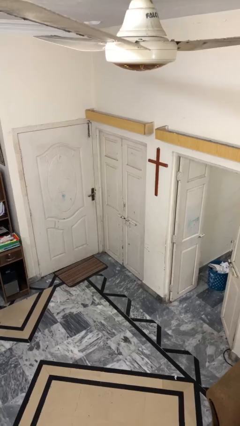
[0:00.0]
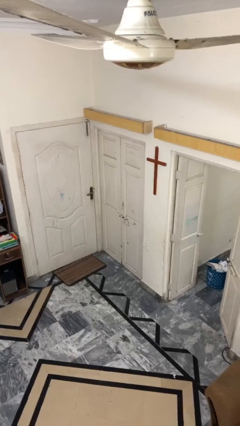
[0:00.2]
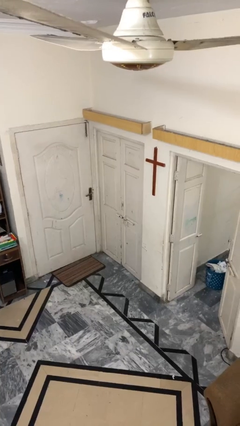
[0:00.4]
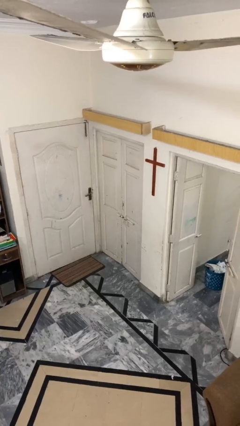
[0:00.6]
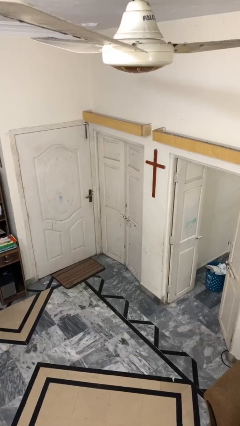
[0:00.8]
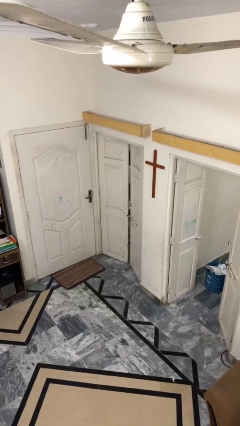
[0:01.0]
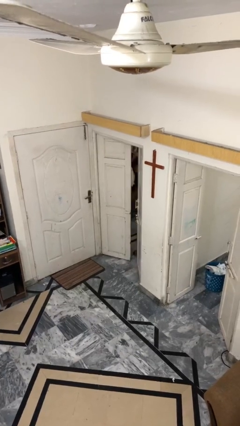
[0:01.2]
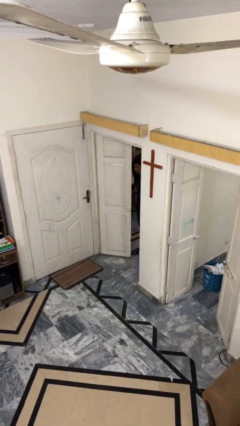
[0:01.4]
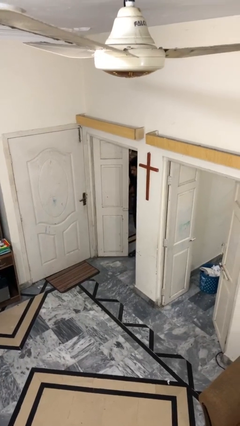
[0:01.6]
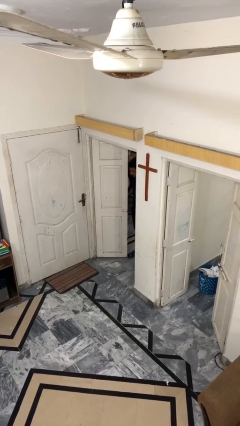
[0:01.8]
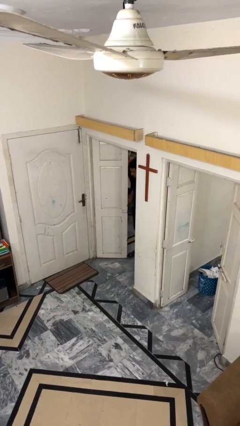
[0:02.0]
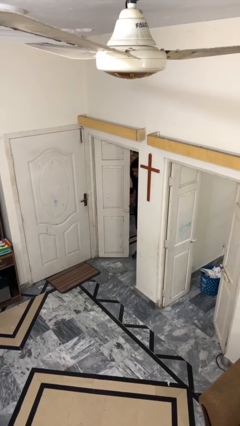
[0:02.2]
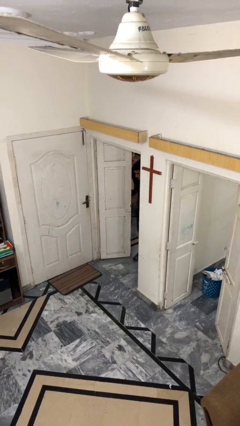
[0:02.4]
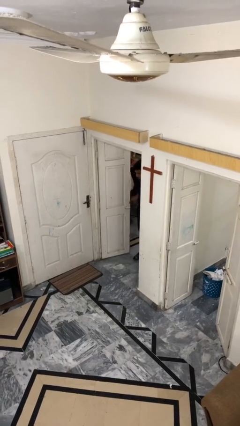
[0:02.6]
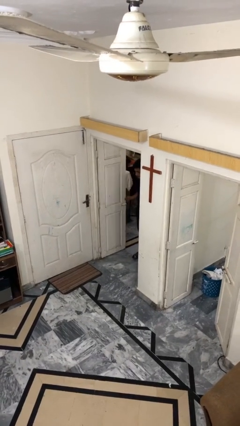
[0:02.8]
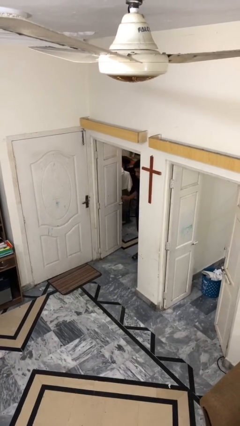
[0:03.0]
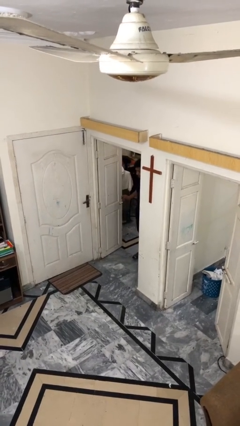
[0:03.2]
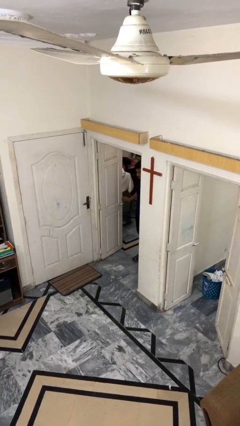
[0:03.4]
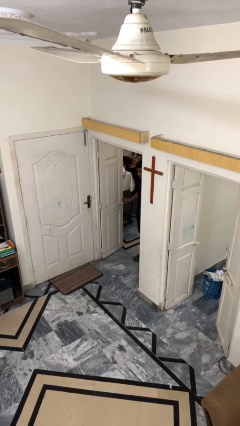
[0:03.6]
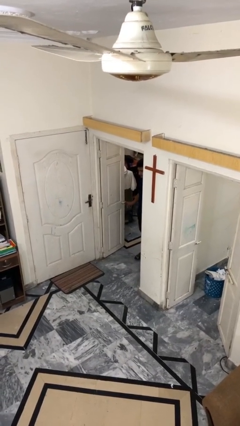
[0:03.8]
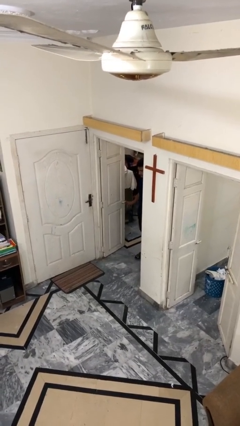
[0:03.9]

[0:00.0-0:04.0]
person opens facility door

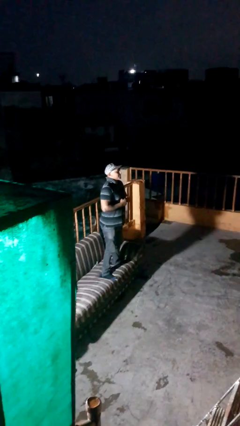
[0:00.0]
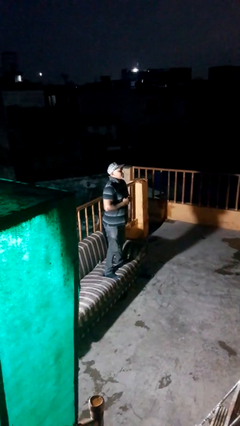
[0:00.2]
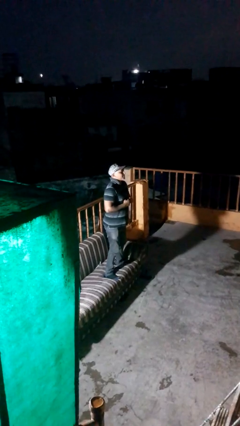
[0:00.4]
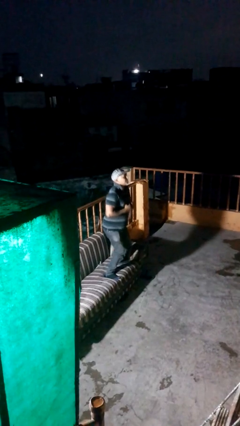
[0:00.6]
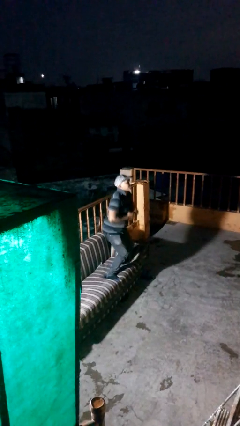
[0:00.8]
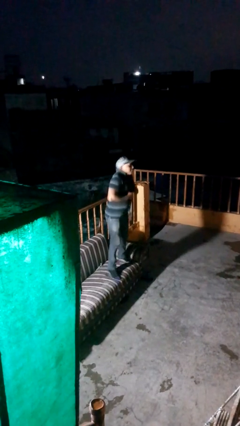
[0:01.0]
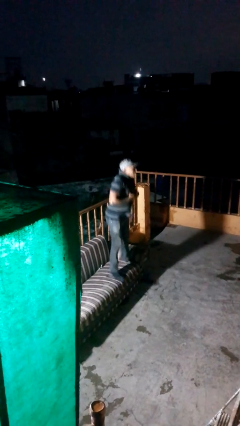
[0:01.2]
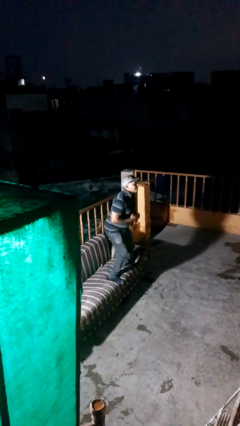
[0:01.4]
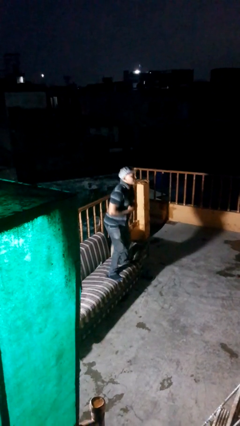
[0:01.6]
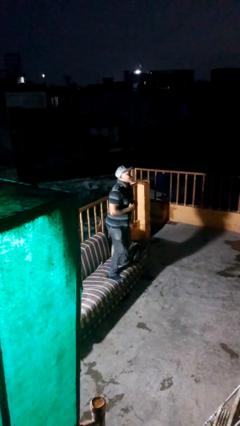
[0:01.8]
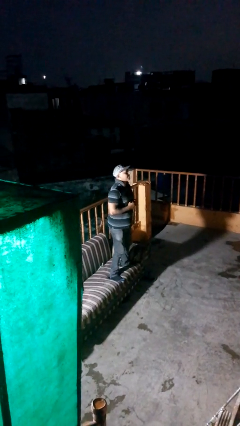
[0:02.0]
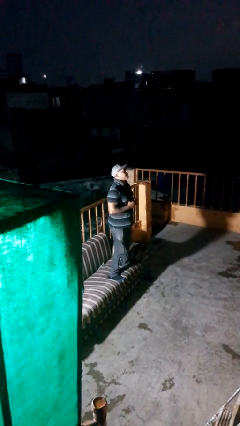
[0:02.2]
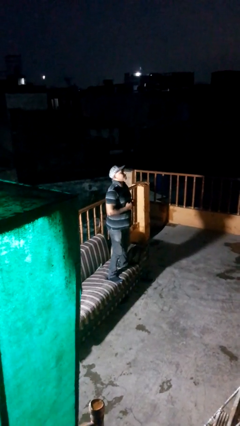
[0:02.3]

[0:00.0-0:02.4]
person jumps on couch

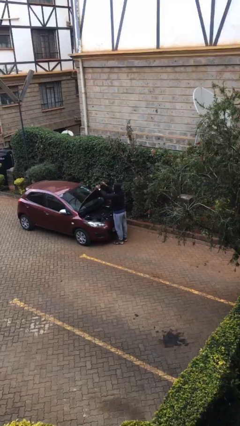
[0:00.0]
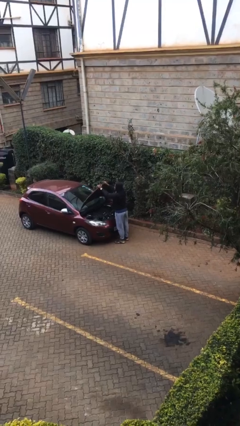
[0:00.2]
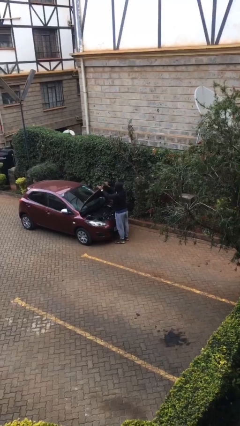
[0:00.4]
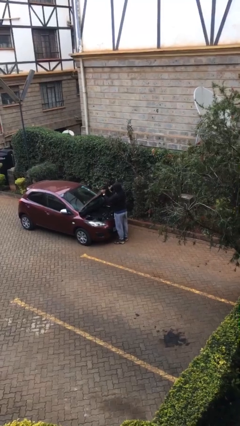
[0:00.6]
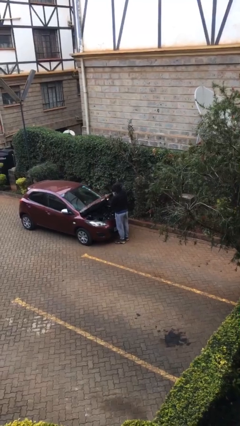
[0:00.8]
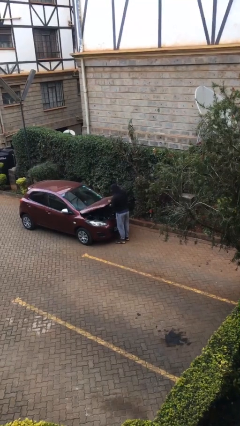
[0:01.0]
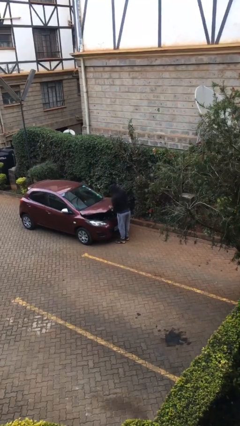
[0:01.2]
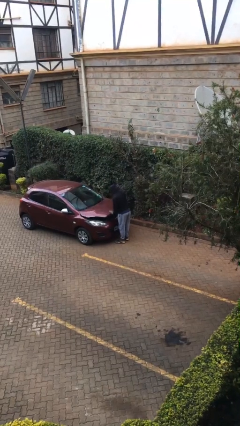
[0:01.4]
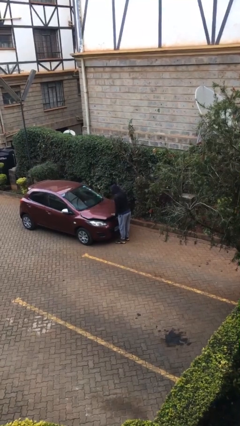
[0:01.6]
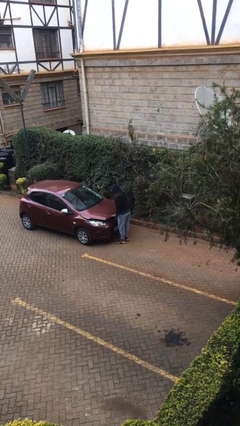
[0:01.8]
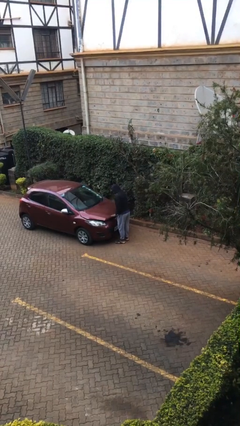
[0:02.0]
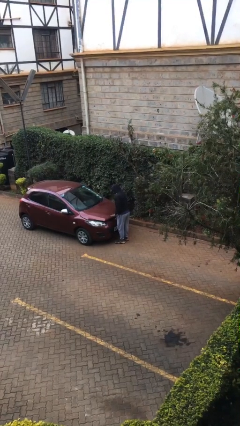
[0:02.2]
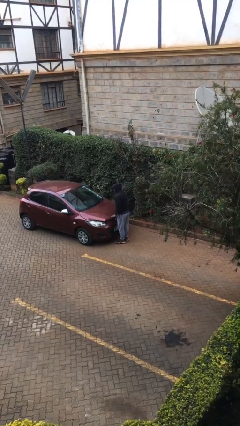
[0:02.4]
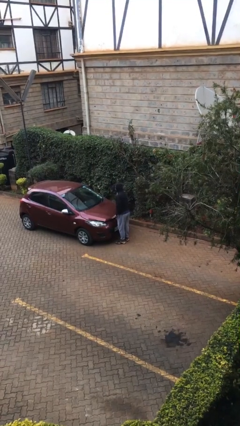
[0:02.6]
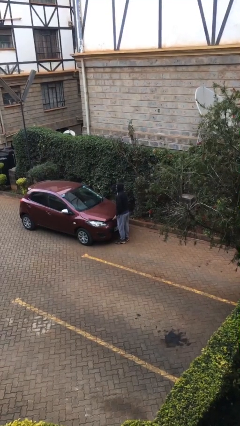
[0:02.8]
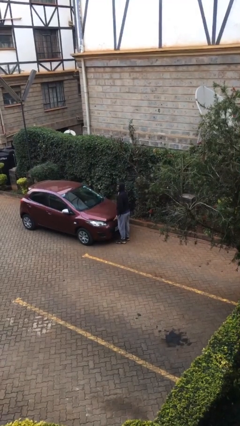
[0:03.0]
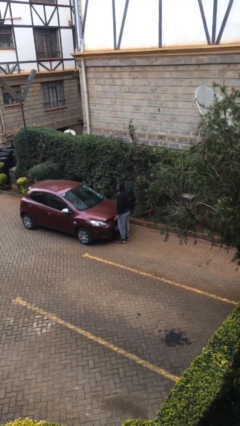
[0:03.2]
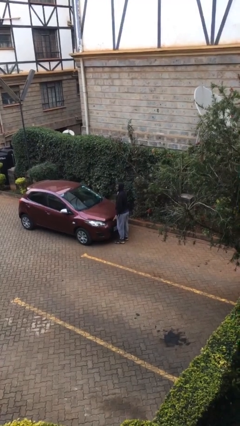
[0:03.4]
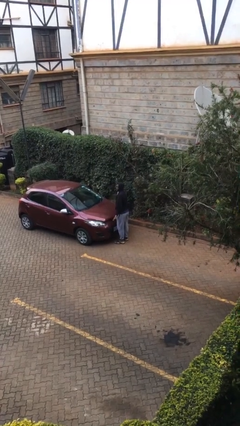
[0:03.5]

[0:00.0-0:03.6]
person closes car hood

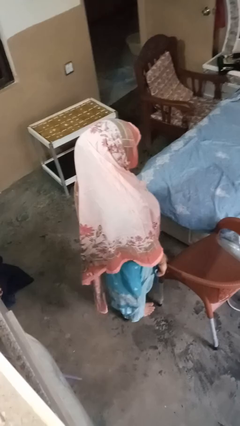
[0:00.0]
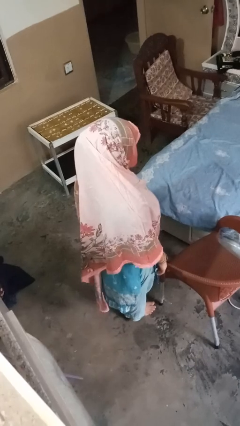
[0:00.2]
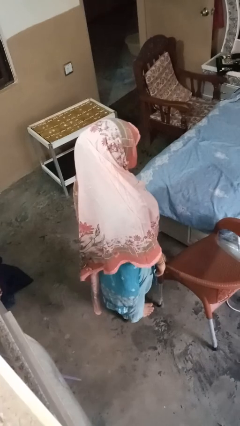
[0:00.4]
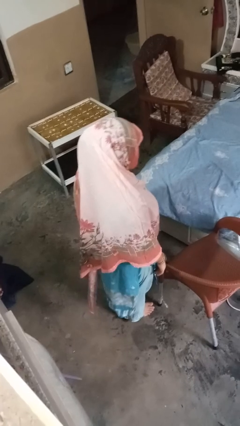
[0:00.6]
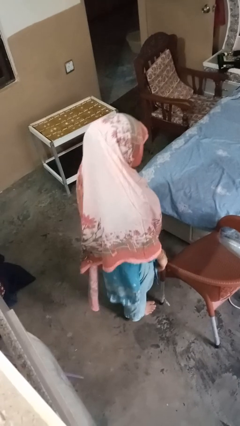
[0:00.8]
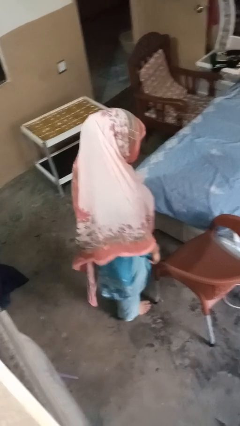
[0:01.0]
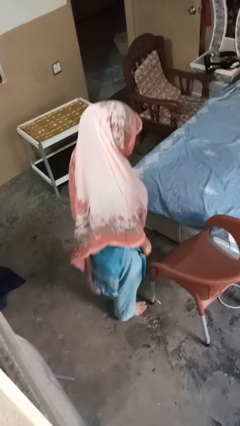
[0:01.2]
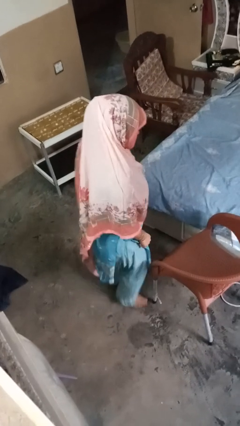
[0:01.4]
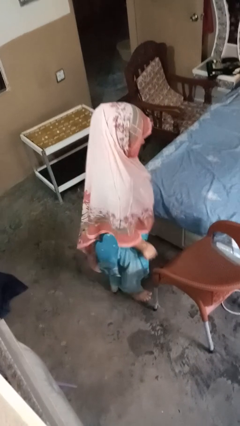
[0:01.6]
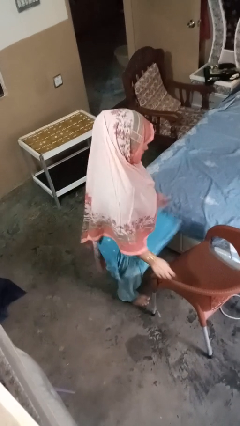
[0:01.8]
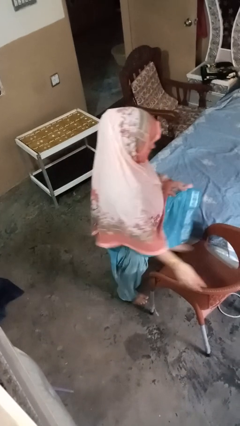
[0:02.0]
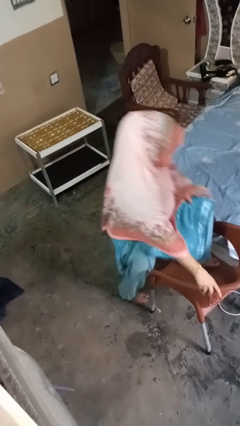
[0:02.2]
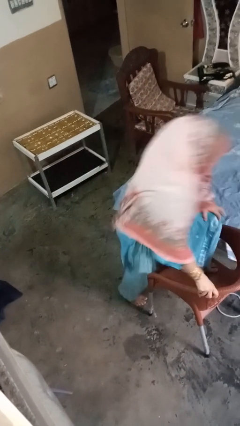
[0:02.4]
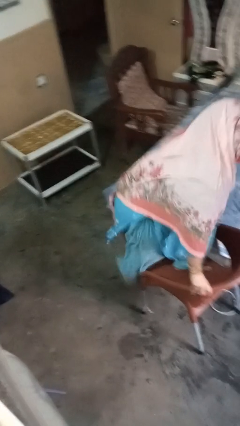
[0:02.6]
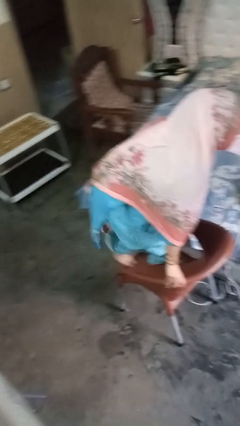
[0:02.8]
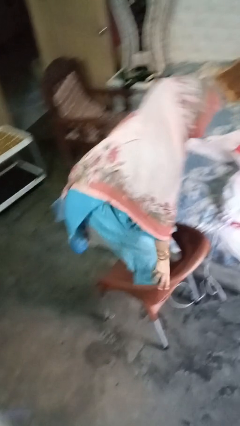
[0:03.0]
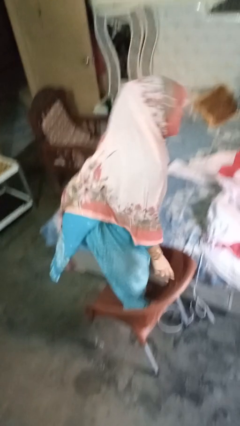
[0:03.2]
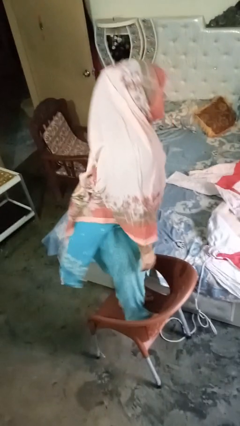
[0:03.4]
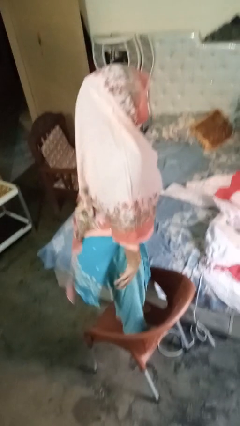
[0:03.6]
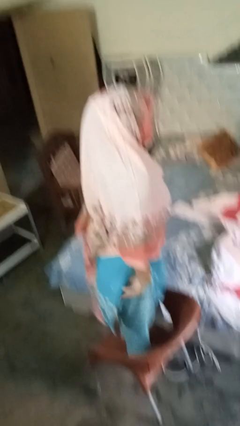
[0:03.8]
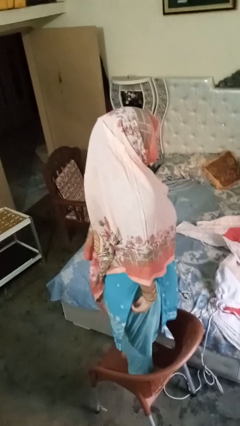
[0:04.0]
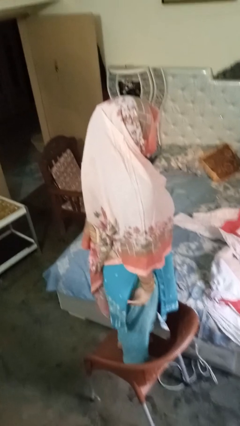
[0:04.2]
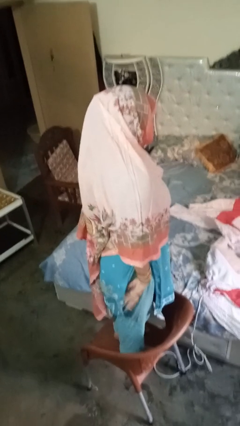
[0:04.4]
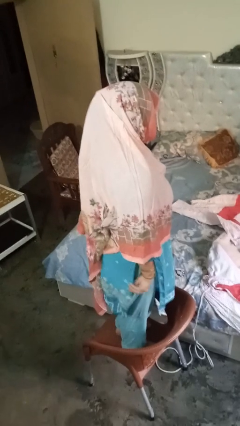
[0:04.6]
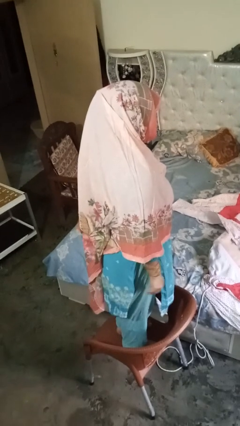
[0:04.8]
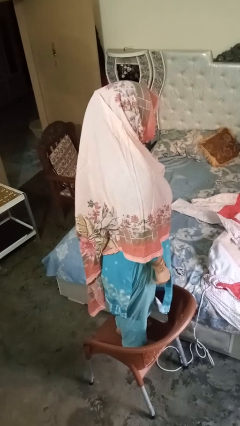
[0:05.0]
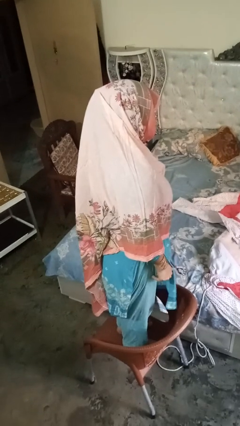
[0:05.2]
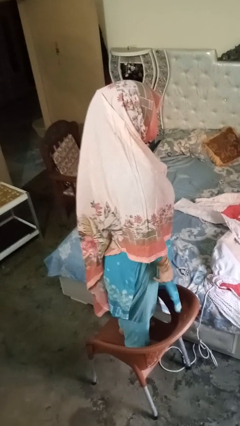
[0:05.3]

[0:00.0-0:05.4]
person climbs on chair

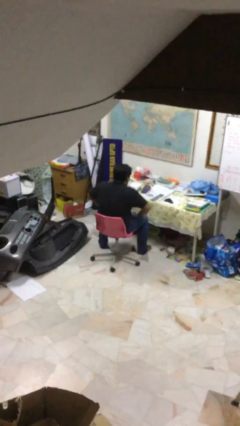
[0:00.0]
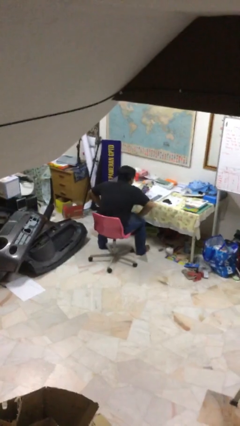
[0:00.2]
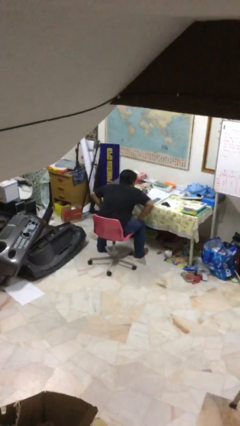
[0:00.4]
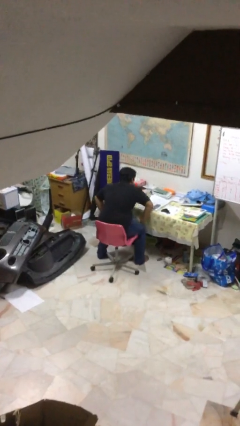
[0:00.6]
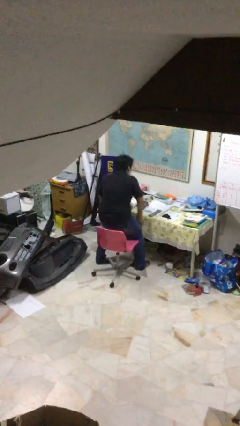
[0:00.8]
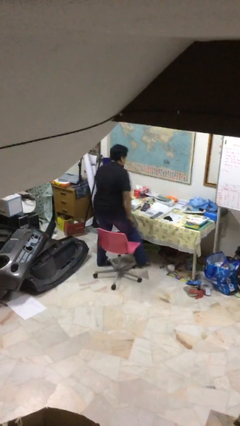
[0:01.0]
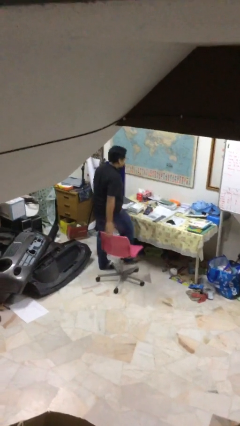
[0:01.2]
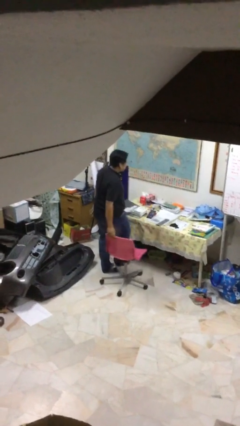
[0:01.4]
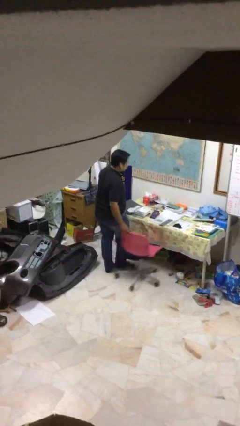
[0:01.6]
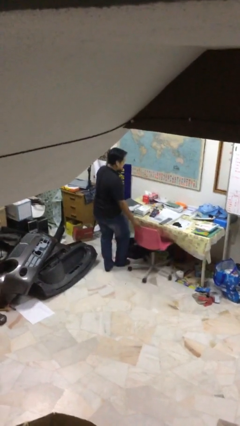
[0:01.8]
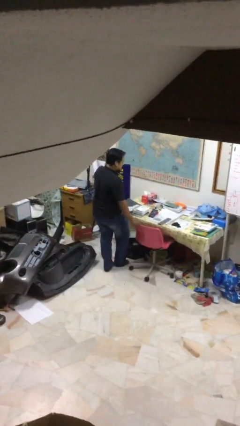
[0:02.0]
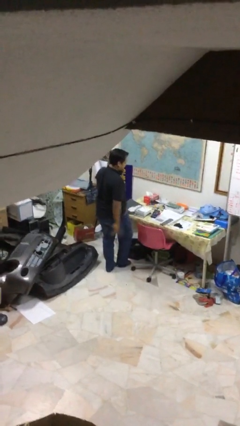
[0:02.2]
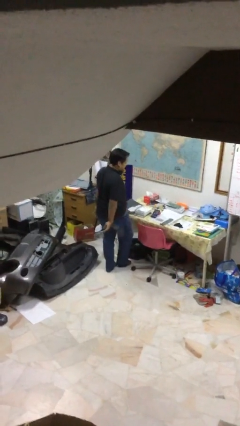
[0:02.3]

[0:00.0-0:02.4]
person stands up
